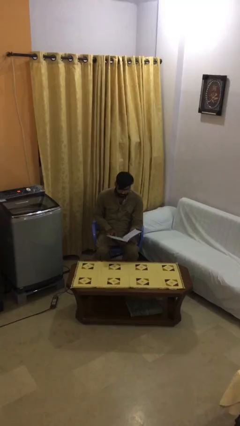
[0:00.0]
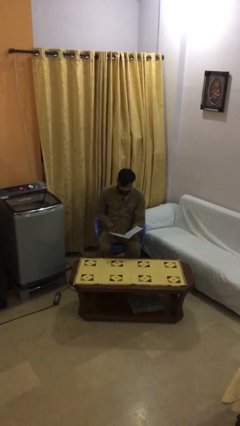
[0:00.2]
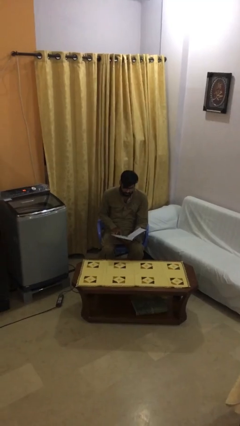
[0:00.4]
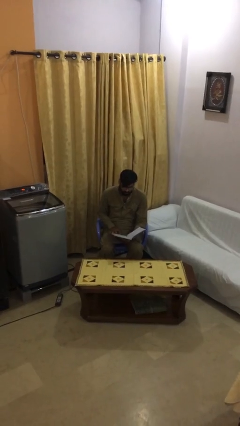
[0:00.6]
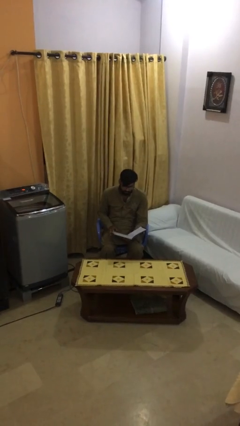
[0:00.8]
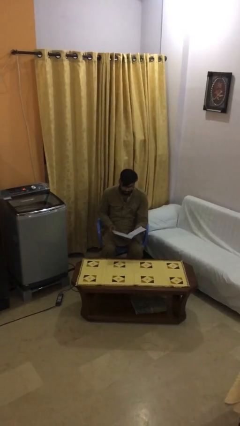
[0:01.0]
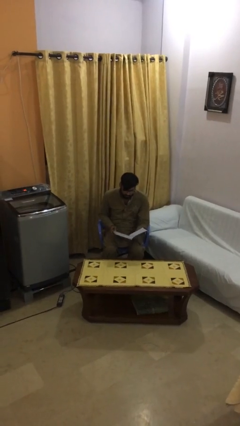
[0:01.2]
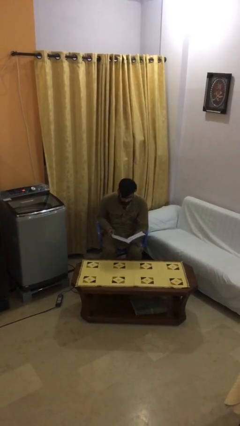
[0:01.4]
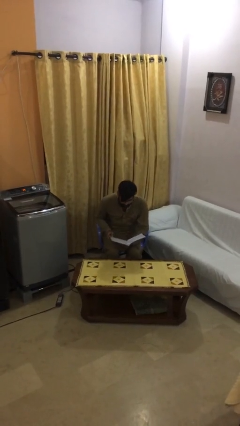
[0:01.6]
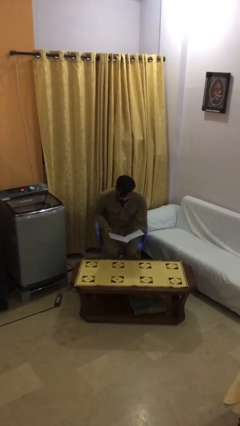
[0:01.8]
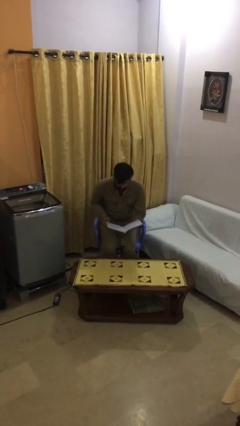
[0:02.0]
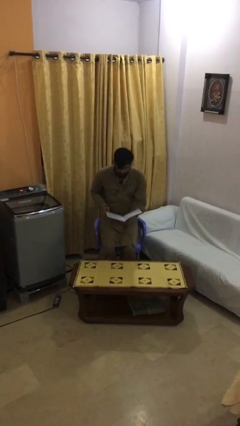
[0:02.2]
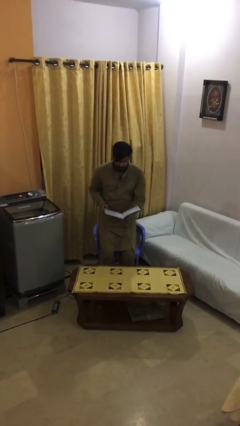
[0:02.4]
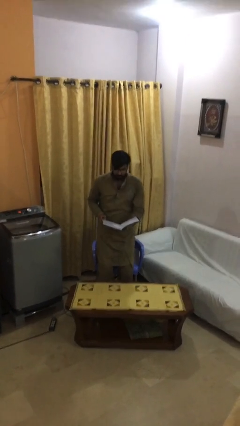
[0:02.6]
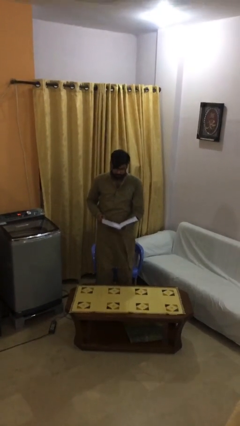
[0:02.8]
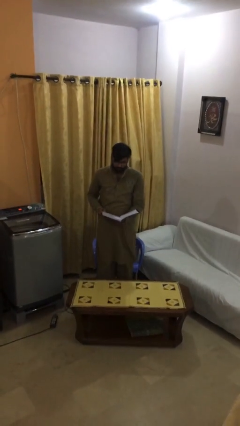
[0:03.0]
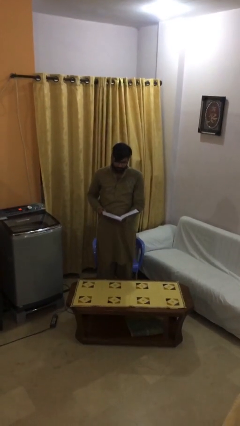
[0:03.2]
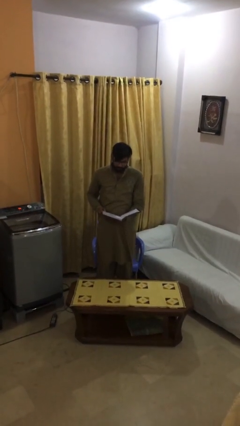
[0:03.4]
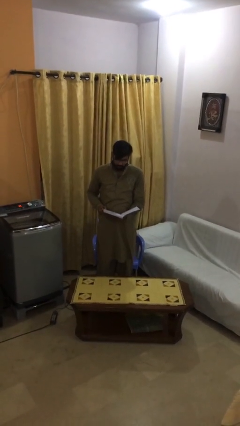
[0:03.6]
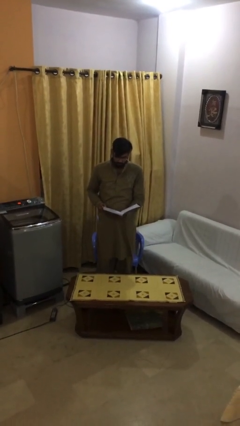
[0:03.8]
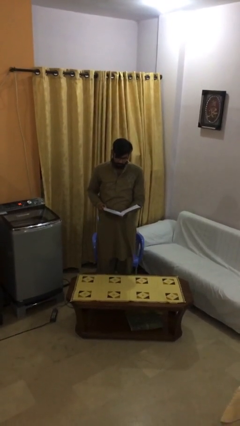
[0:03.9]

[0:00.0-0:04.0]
person stands up

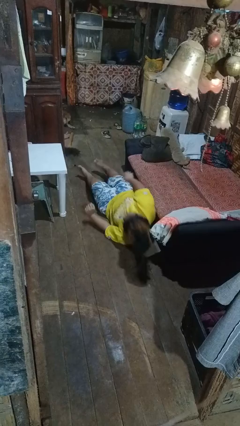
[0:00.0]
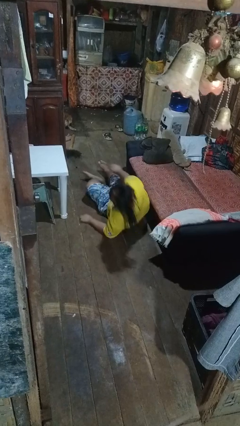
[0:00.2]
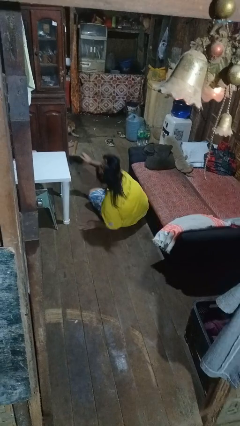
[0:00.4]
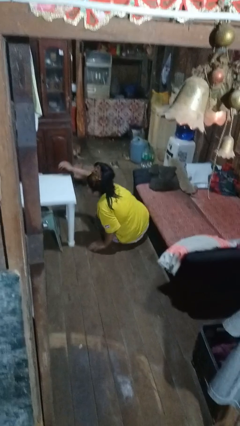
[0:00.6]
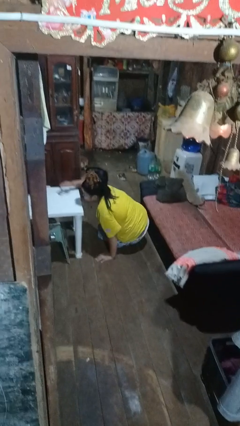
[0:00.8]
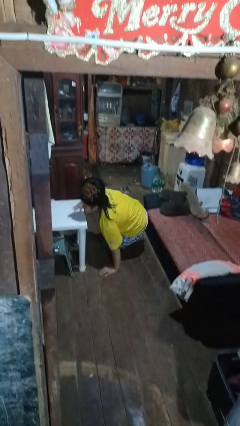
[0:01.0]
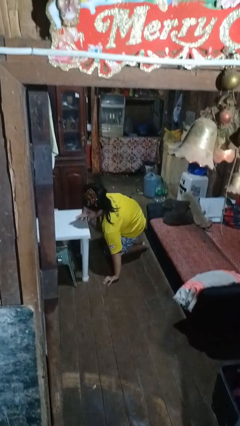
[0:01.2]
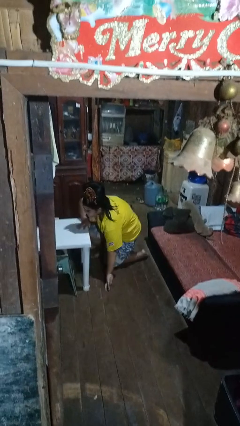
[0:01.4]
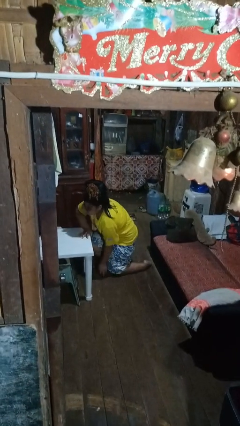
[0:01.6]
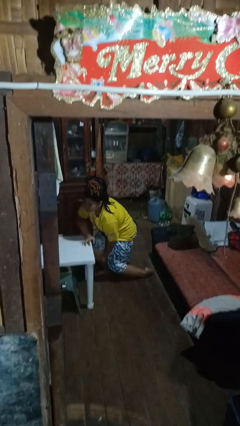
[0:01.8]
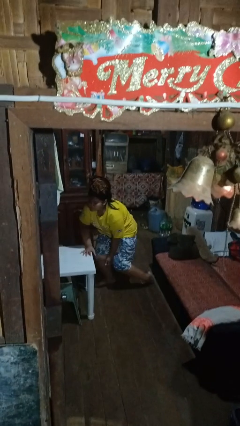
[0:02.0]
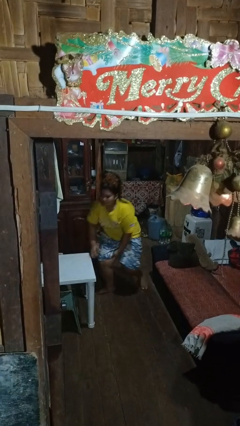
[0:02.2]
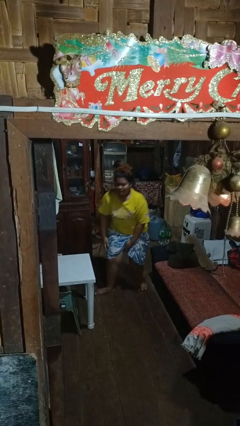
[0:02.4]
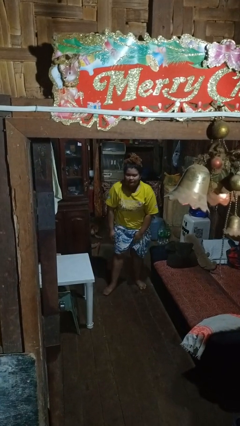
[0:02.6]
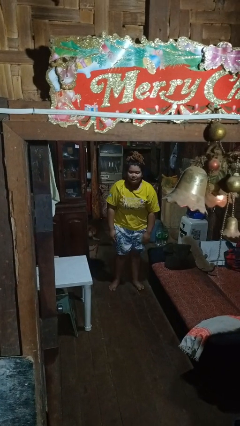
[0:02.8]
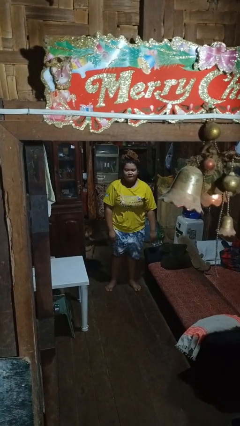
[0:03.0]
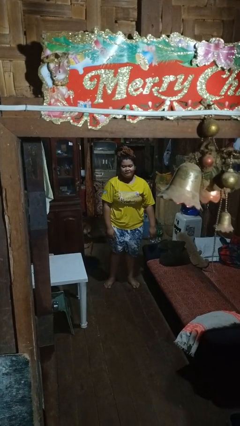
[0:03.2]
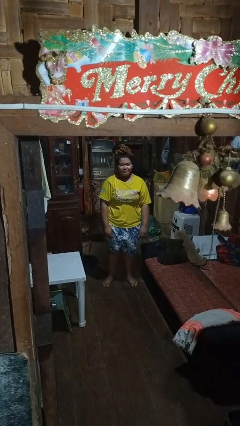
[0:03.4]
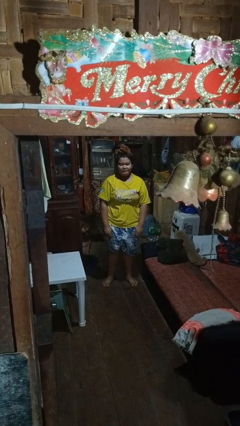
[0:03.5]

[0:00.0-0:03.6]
person stands up from floor

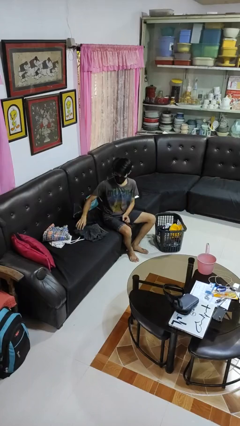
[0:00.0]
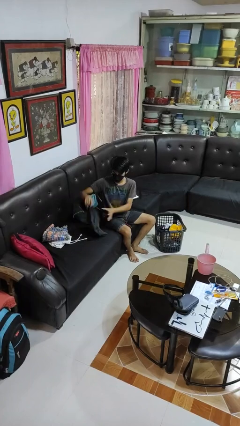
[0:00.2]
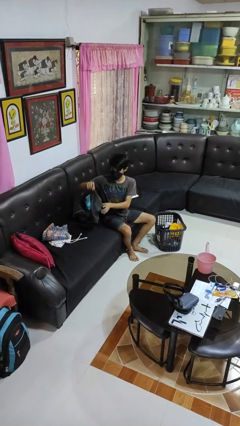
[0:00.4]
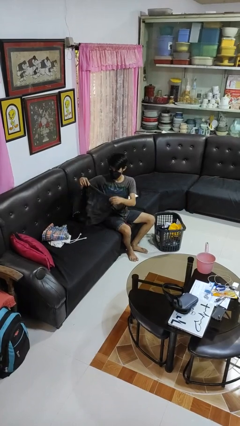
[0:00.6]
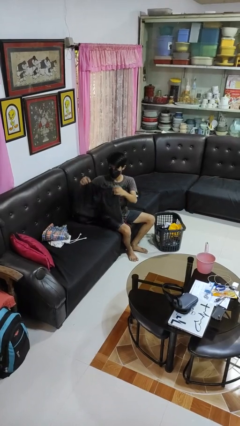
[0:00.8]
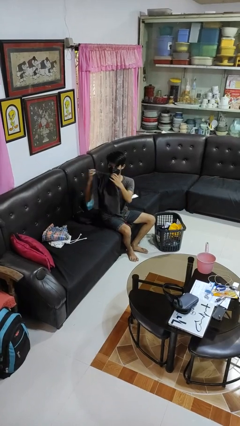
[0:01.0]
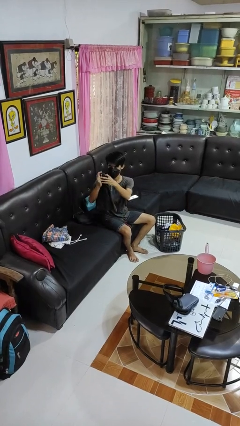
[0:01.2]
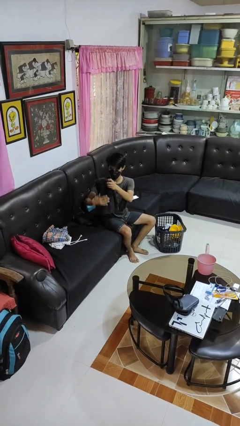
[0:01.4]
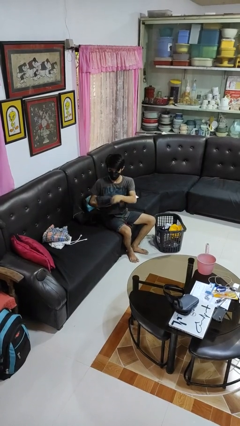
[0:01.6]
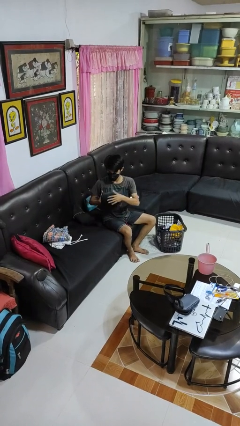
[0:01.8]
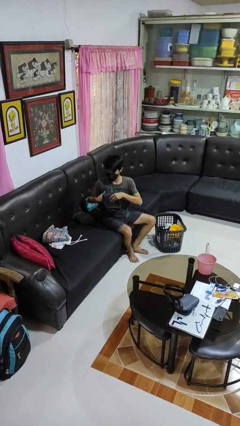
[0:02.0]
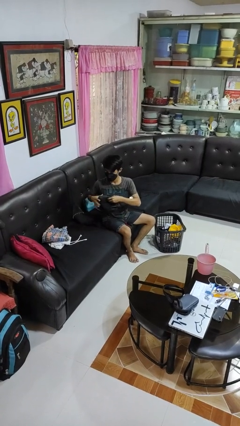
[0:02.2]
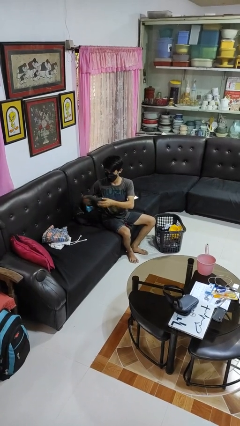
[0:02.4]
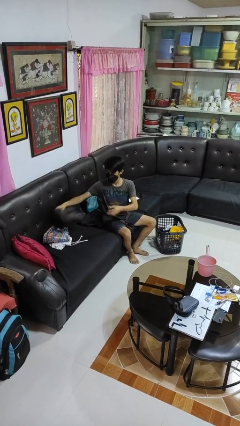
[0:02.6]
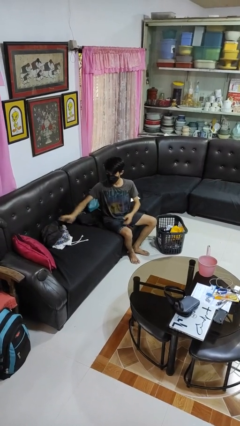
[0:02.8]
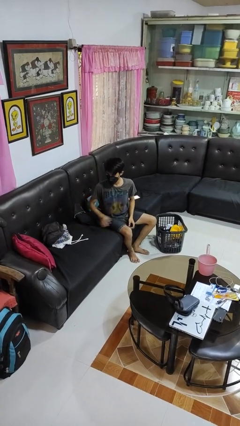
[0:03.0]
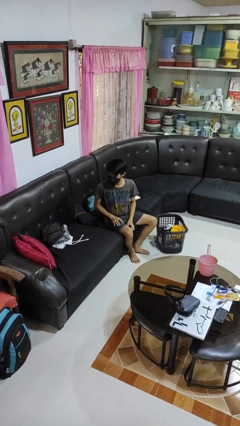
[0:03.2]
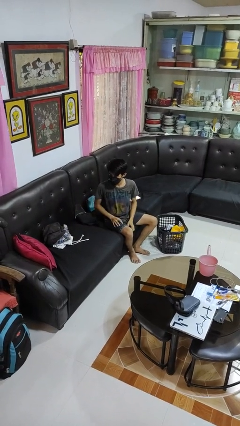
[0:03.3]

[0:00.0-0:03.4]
person folds pants

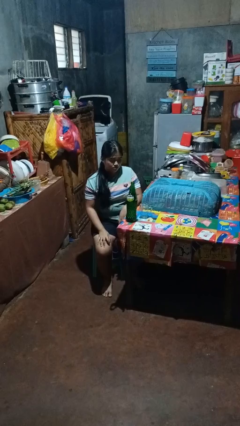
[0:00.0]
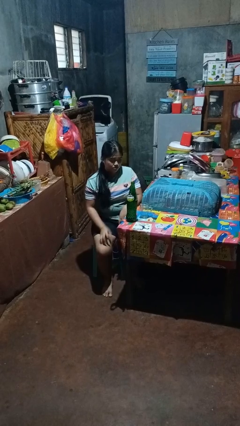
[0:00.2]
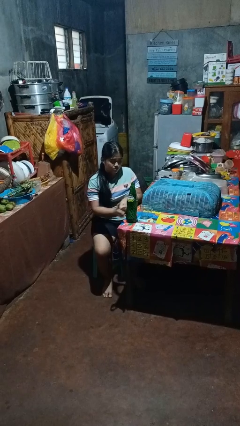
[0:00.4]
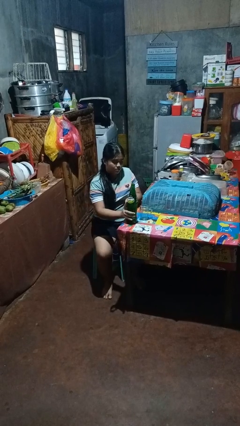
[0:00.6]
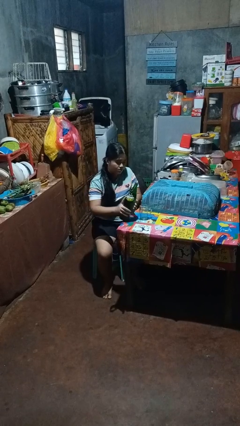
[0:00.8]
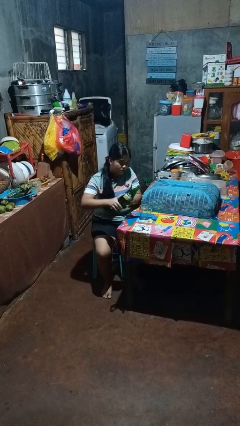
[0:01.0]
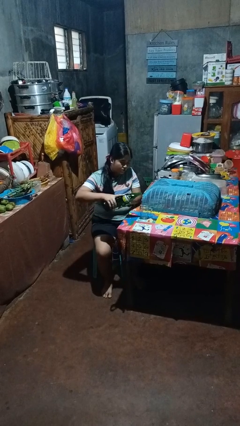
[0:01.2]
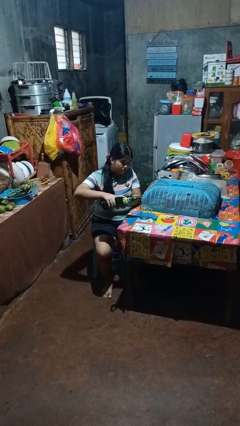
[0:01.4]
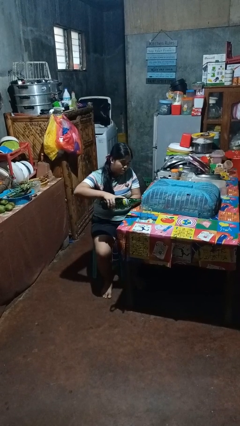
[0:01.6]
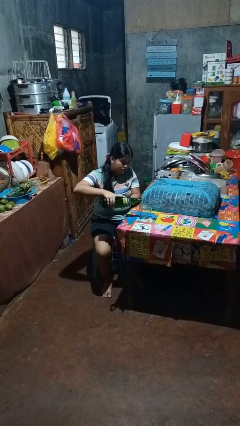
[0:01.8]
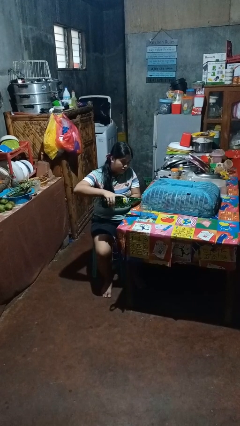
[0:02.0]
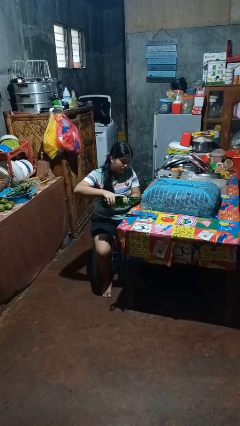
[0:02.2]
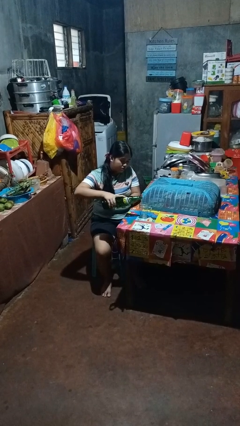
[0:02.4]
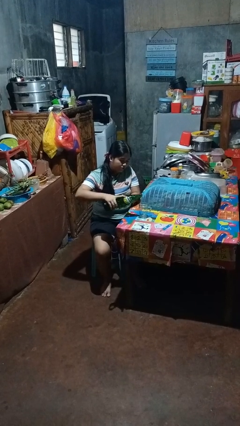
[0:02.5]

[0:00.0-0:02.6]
person pours liquid into cup

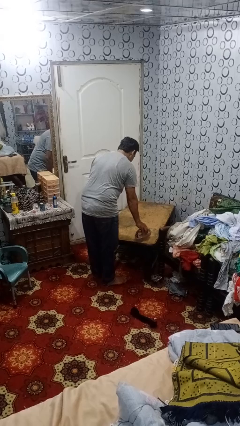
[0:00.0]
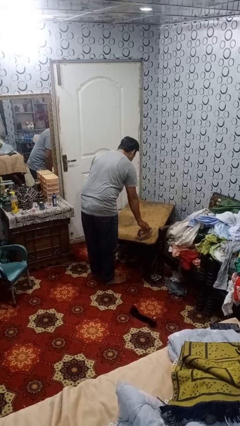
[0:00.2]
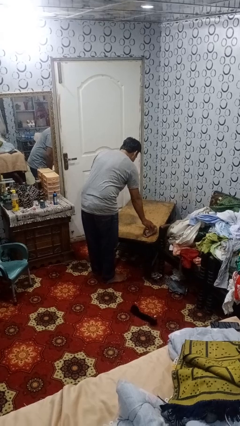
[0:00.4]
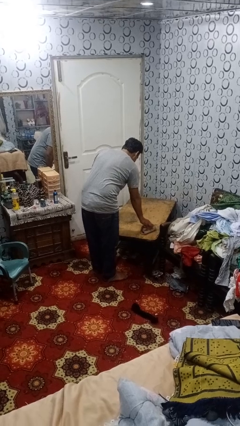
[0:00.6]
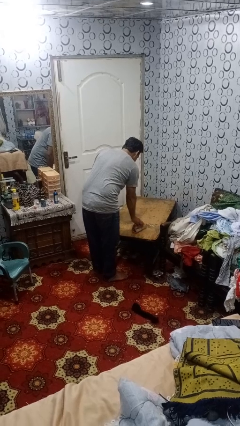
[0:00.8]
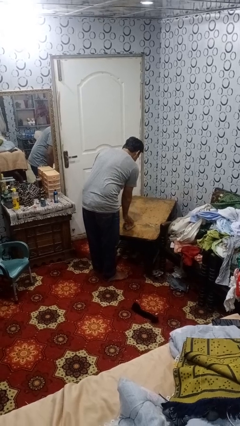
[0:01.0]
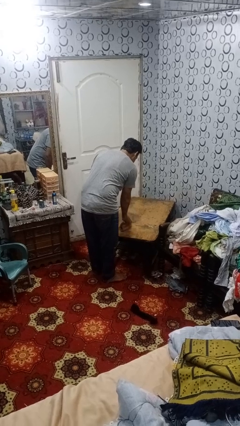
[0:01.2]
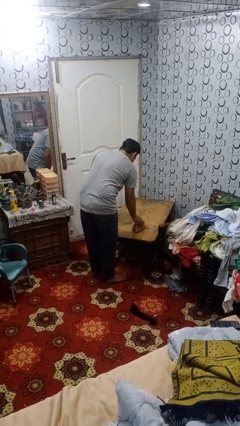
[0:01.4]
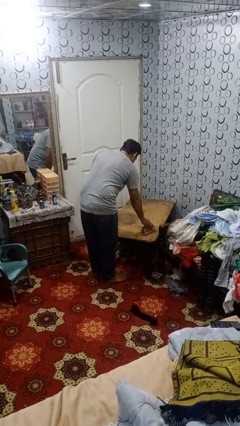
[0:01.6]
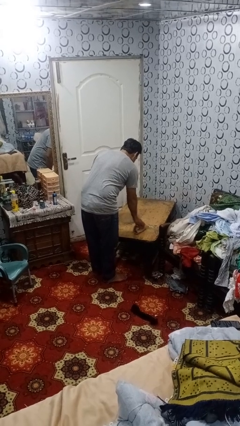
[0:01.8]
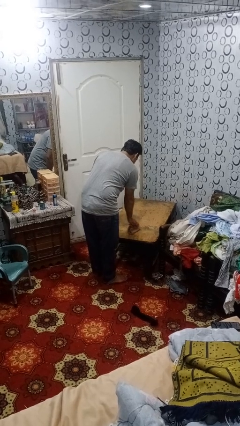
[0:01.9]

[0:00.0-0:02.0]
person cleans table with rag

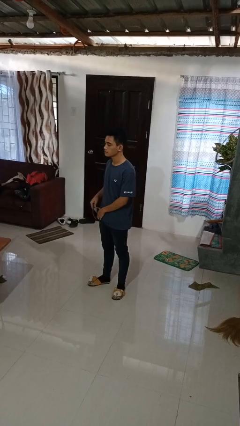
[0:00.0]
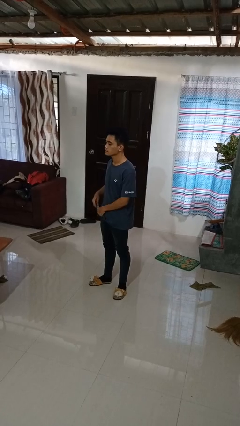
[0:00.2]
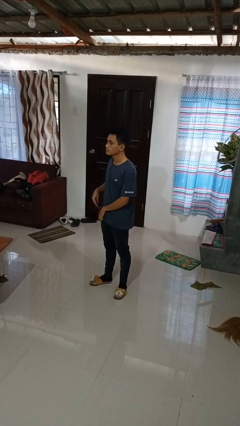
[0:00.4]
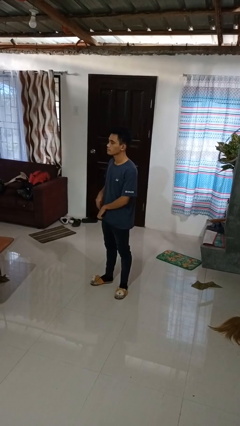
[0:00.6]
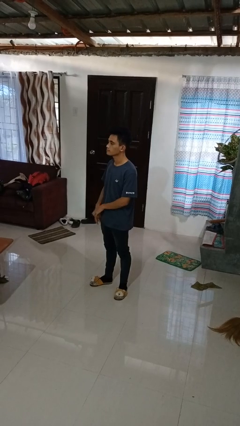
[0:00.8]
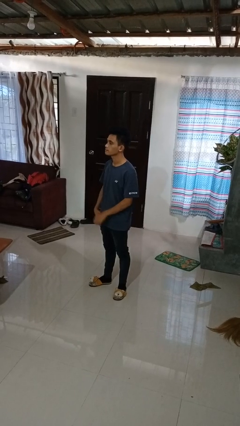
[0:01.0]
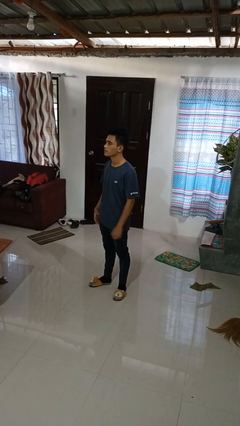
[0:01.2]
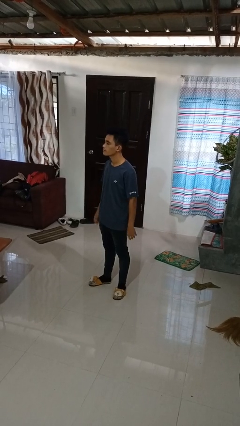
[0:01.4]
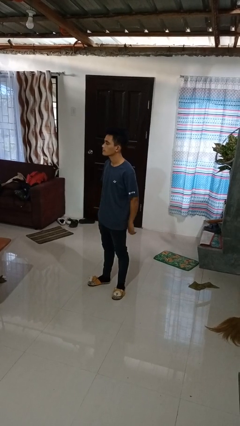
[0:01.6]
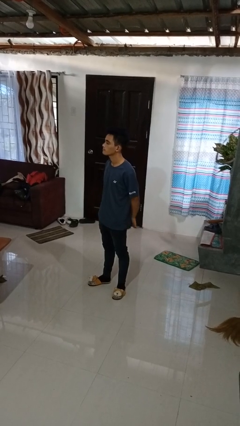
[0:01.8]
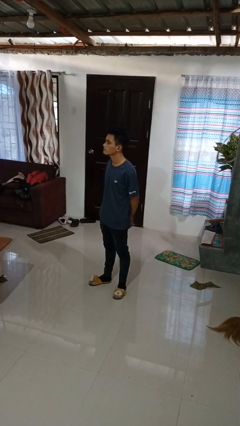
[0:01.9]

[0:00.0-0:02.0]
person puts phone into pocket
